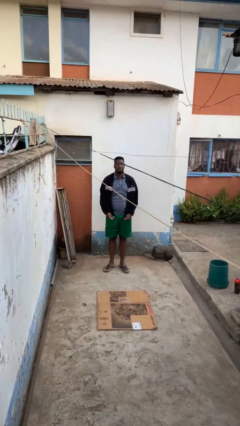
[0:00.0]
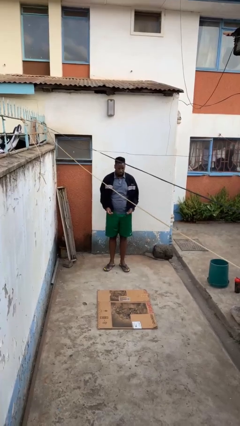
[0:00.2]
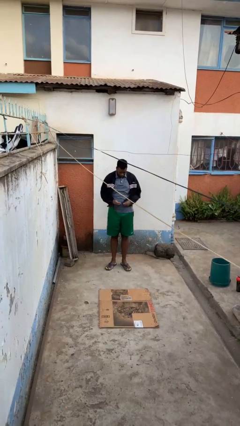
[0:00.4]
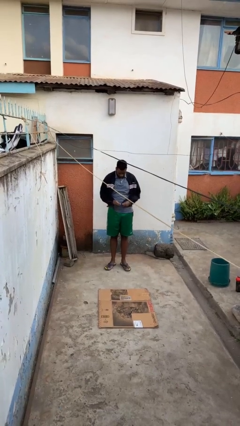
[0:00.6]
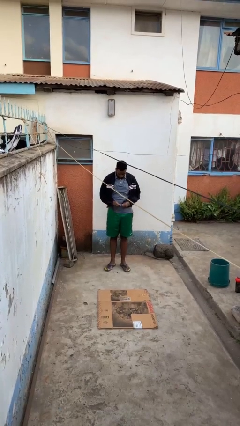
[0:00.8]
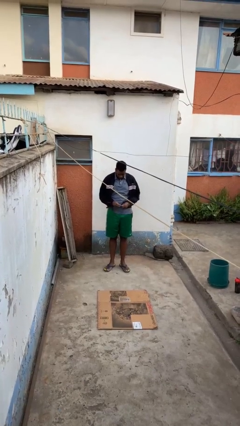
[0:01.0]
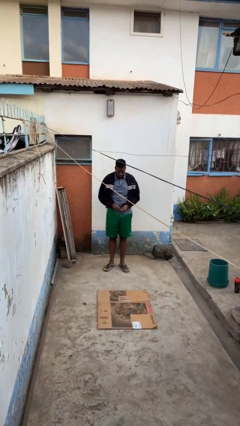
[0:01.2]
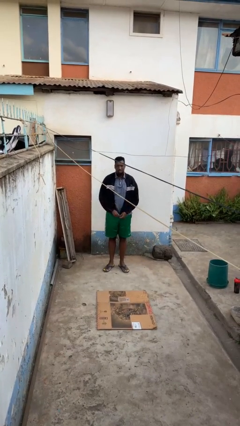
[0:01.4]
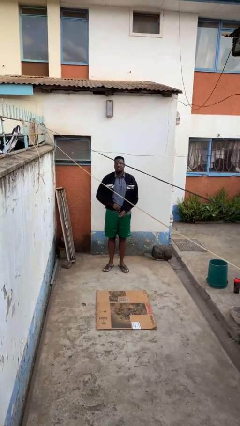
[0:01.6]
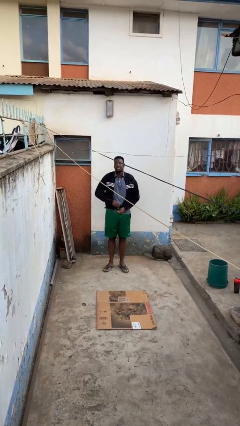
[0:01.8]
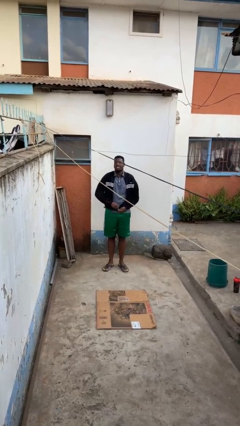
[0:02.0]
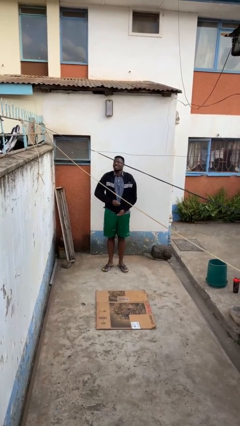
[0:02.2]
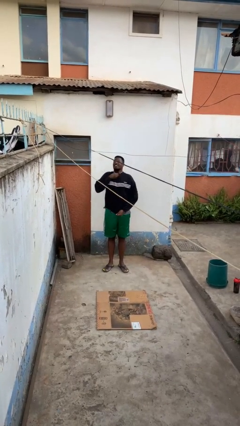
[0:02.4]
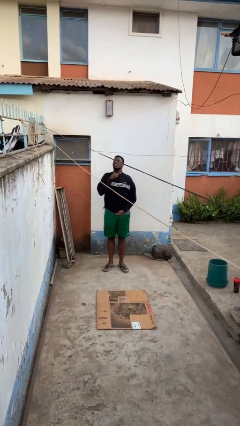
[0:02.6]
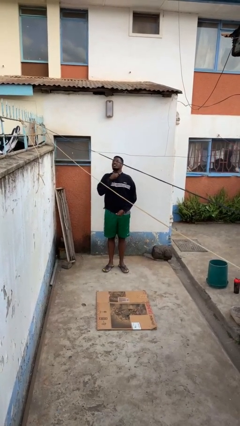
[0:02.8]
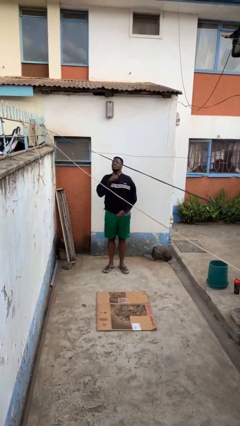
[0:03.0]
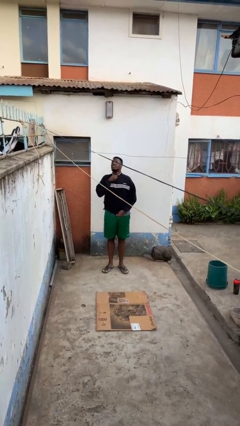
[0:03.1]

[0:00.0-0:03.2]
person zips up jacket

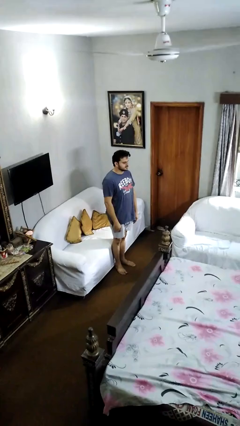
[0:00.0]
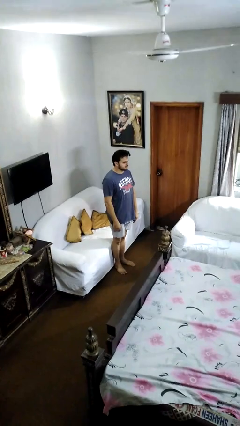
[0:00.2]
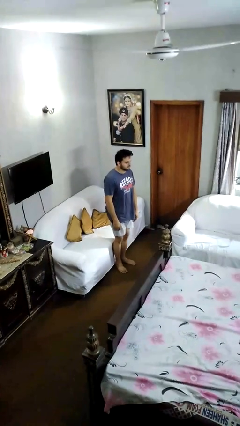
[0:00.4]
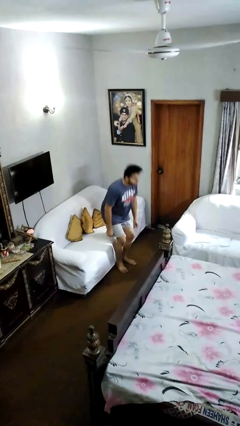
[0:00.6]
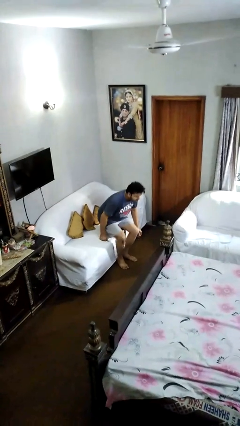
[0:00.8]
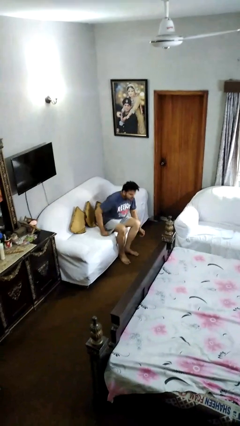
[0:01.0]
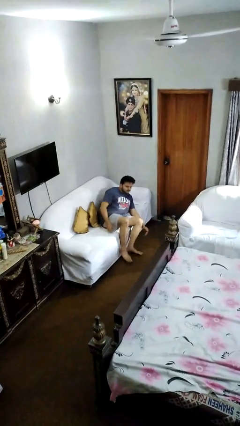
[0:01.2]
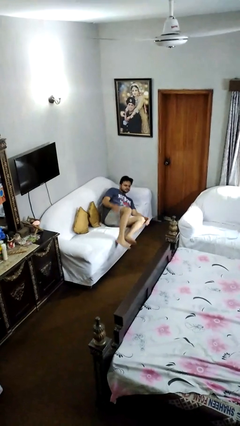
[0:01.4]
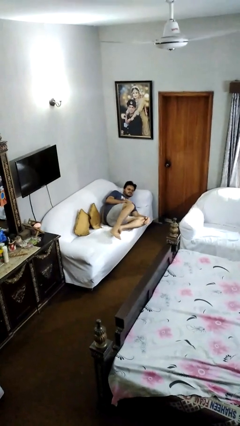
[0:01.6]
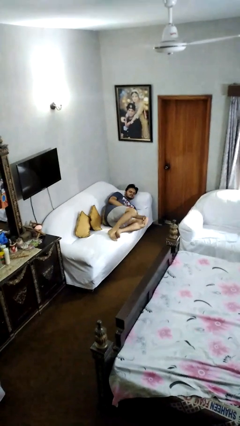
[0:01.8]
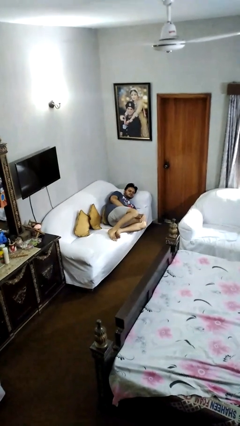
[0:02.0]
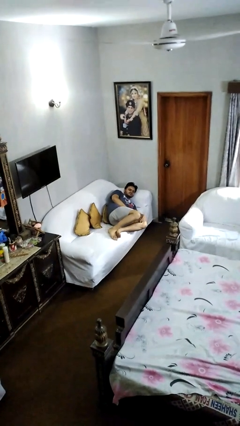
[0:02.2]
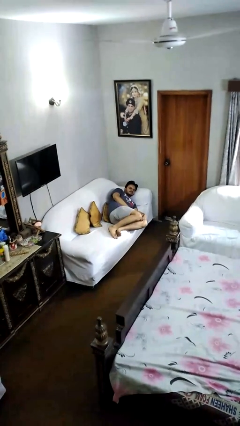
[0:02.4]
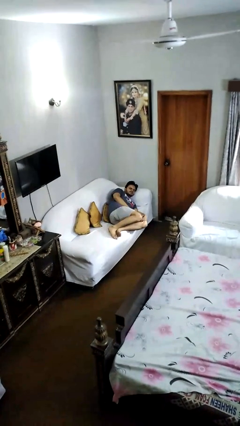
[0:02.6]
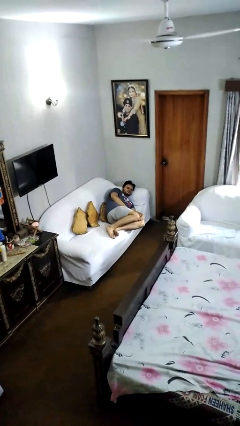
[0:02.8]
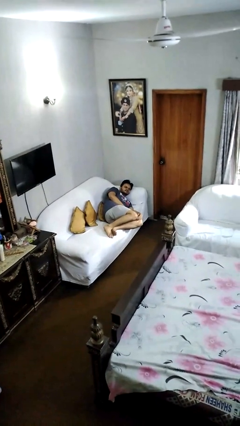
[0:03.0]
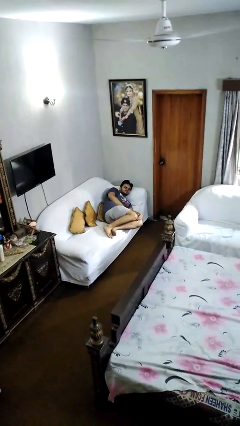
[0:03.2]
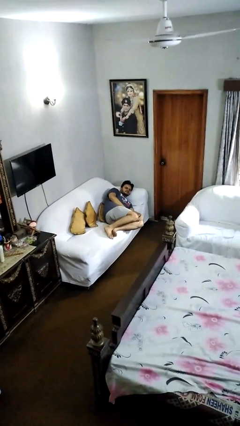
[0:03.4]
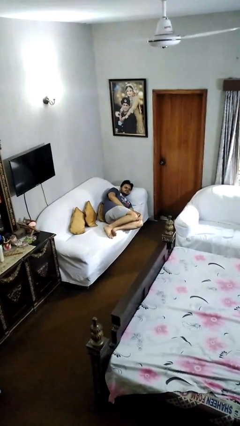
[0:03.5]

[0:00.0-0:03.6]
person lies down on couch

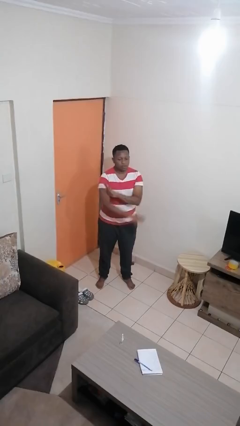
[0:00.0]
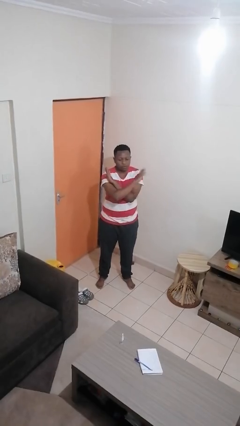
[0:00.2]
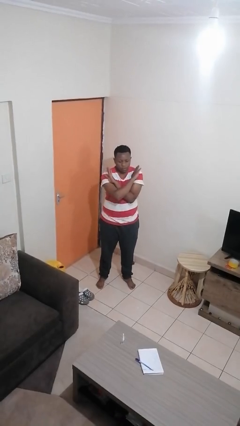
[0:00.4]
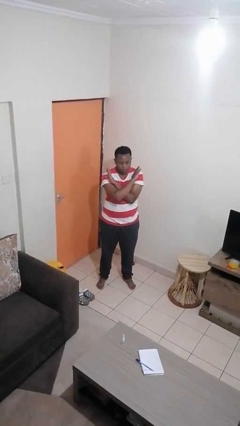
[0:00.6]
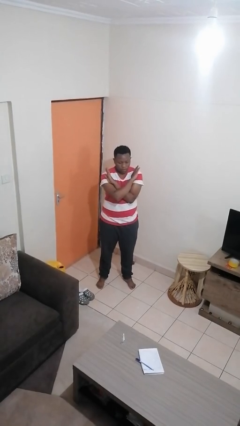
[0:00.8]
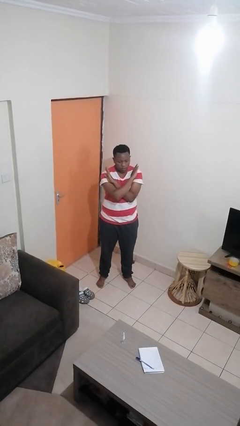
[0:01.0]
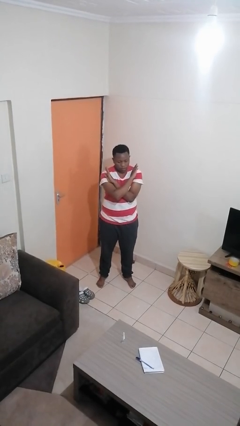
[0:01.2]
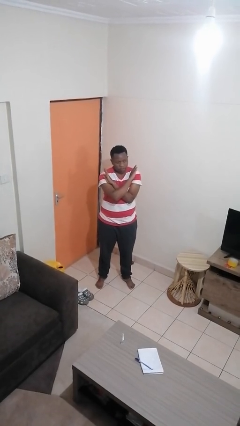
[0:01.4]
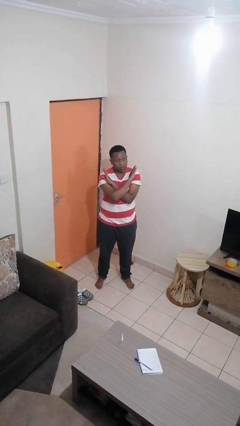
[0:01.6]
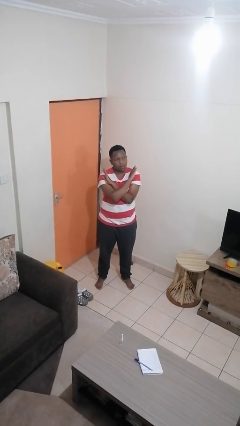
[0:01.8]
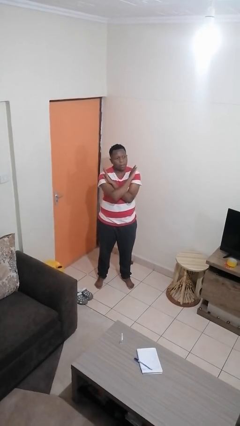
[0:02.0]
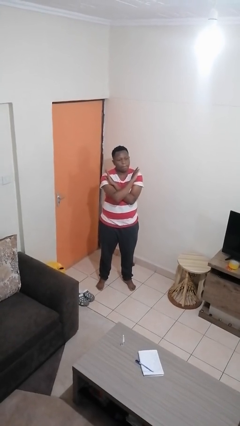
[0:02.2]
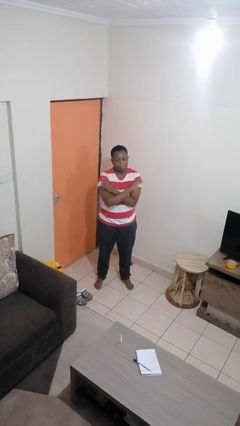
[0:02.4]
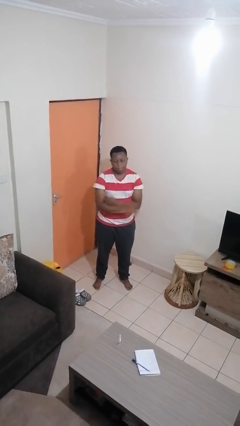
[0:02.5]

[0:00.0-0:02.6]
person gestures arms x

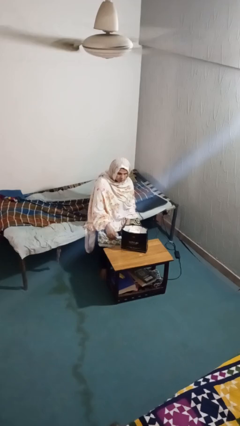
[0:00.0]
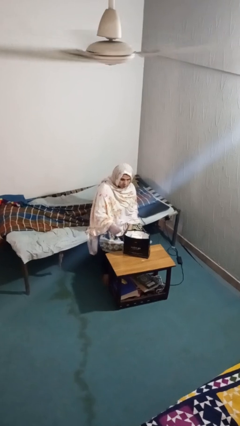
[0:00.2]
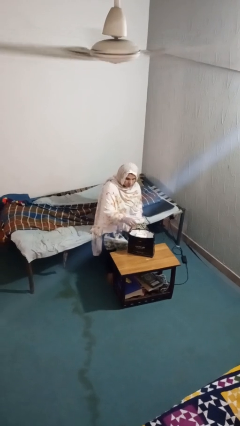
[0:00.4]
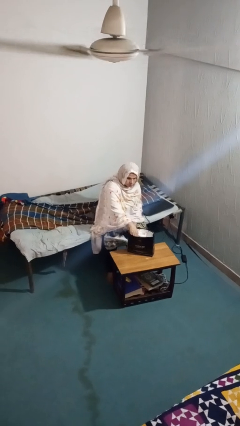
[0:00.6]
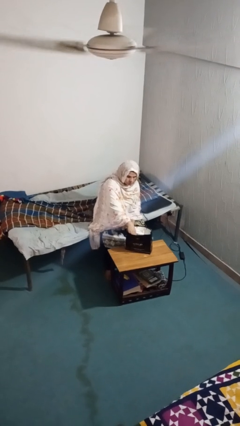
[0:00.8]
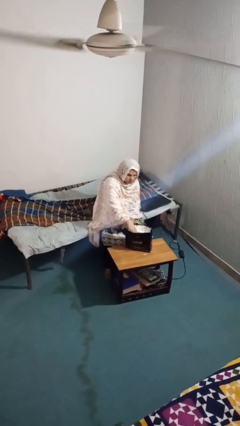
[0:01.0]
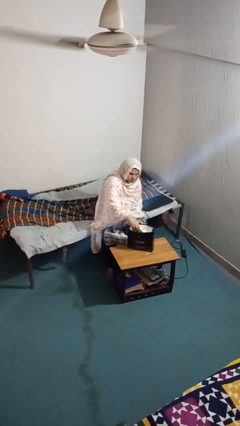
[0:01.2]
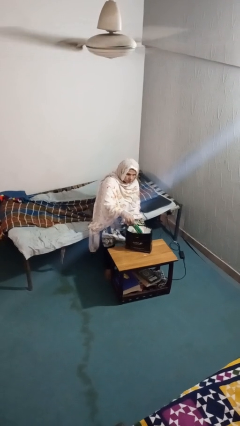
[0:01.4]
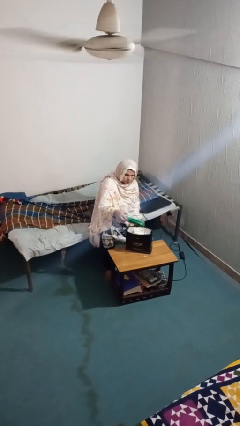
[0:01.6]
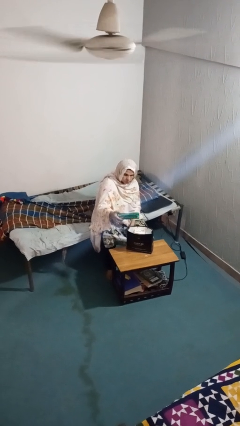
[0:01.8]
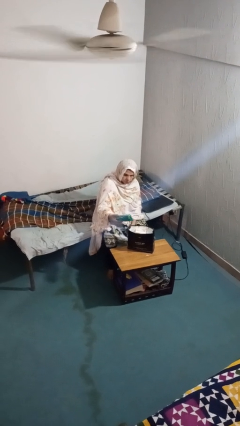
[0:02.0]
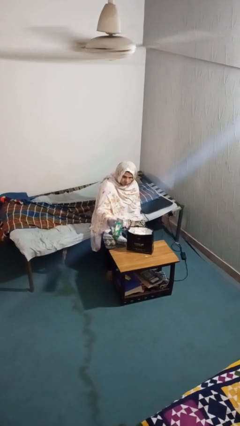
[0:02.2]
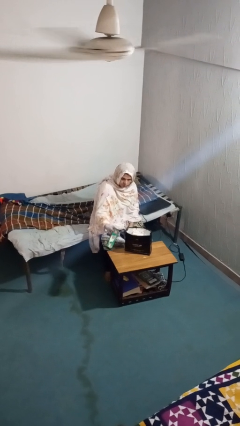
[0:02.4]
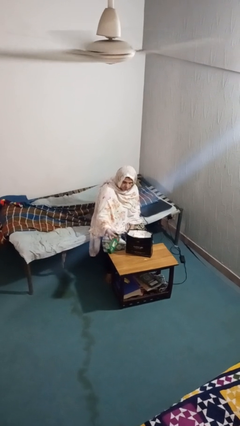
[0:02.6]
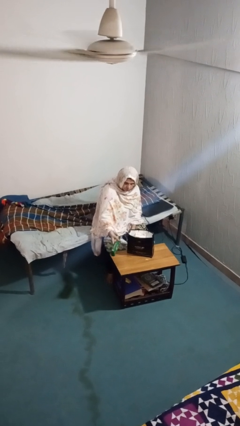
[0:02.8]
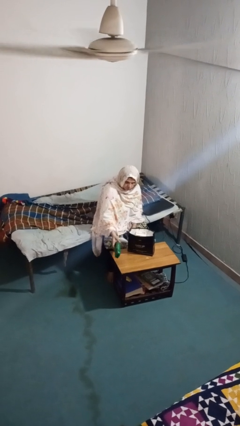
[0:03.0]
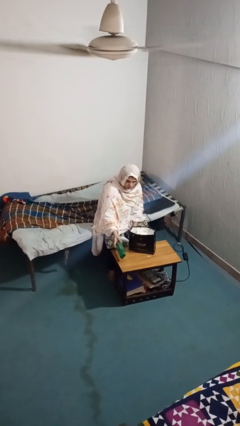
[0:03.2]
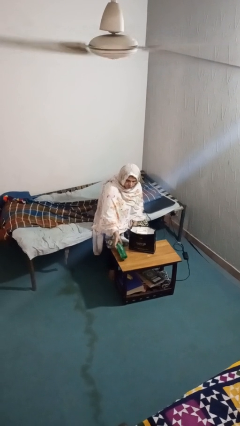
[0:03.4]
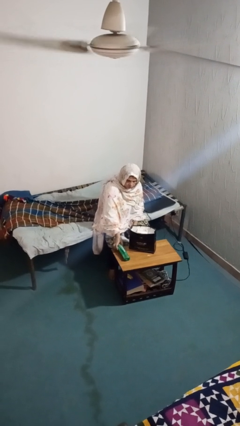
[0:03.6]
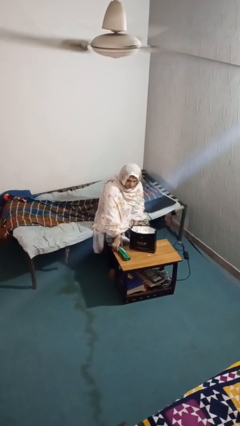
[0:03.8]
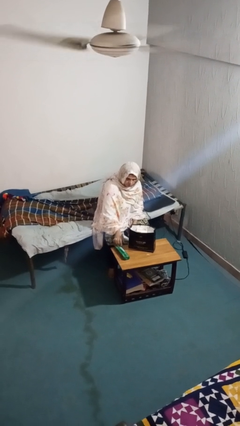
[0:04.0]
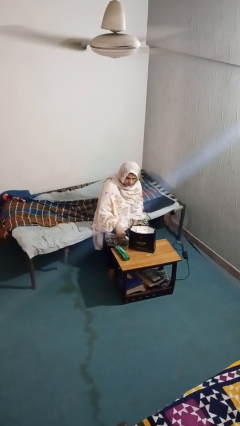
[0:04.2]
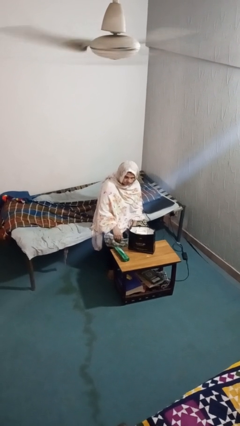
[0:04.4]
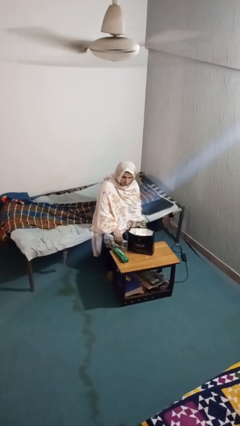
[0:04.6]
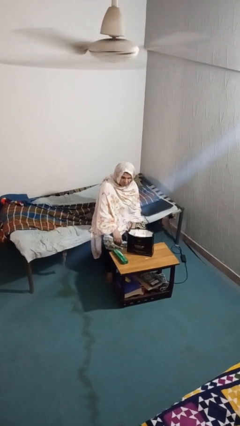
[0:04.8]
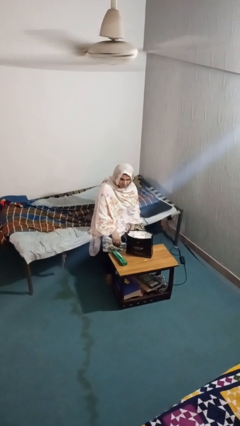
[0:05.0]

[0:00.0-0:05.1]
person takes object from bag

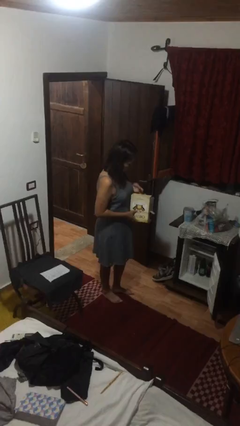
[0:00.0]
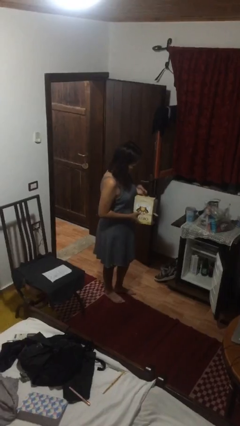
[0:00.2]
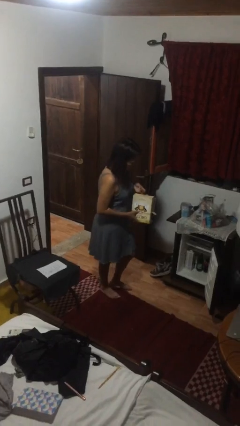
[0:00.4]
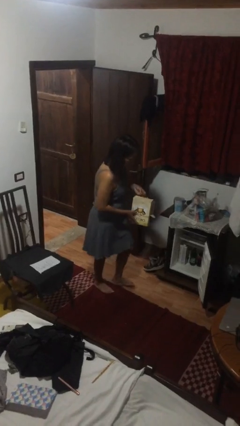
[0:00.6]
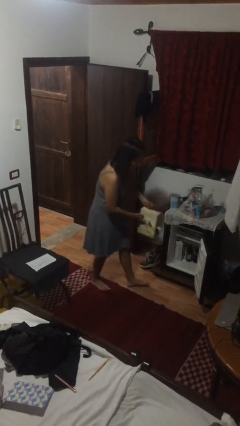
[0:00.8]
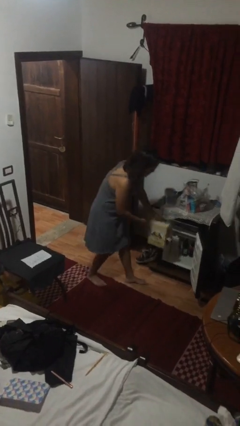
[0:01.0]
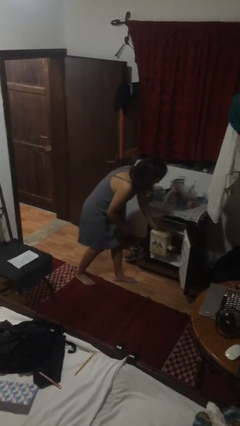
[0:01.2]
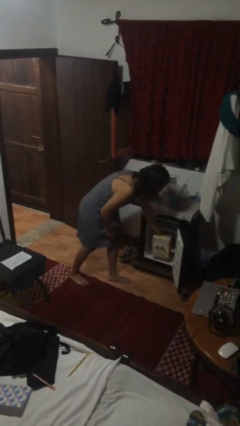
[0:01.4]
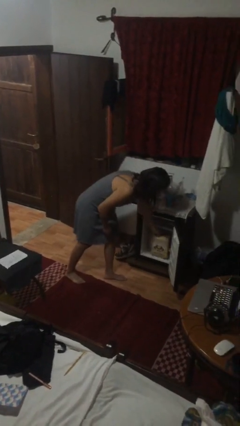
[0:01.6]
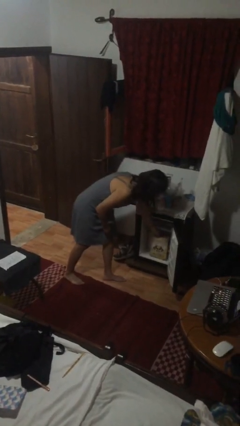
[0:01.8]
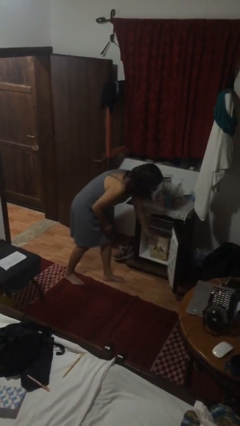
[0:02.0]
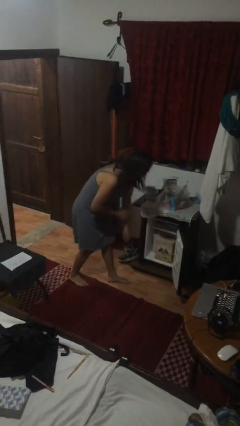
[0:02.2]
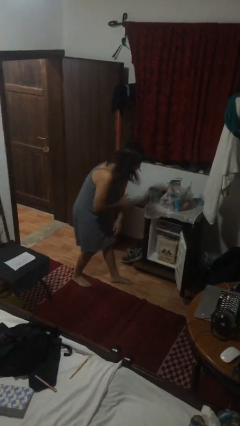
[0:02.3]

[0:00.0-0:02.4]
person puts down object into cabinet

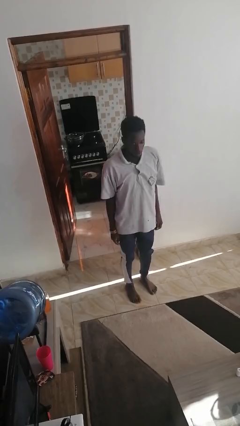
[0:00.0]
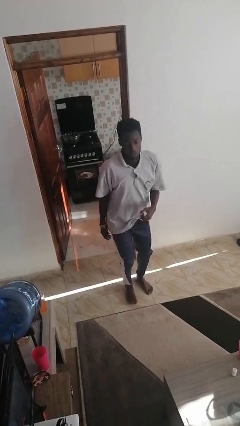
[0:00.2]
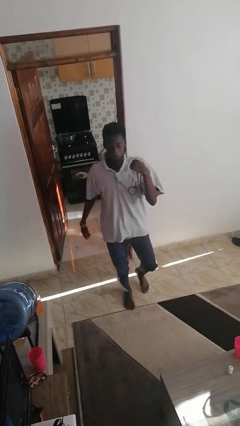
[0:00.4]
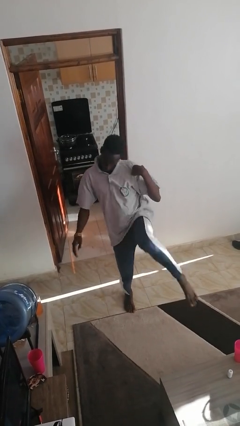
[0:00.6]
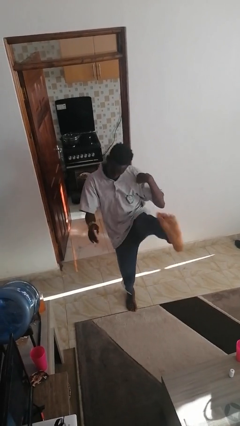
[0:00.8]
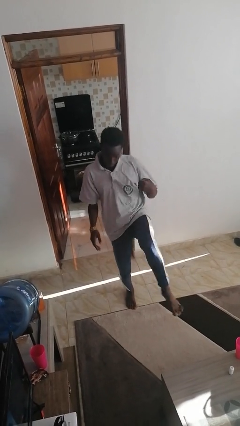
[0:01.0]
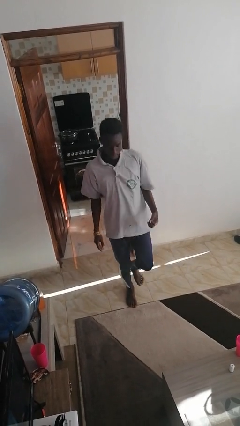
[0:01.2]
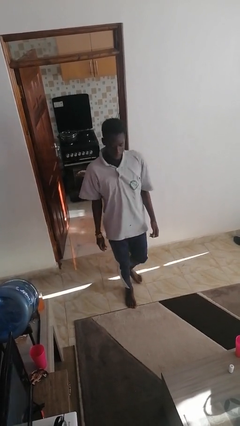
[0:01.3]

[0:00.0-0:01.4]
person karate kicks
